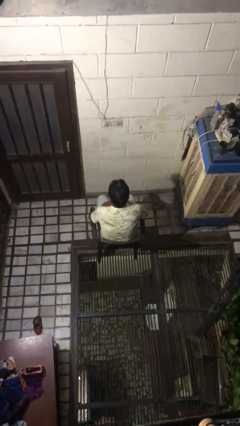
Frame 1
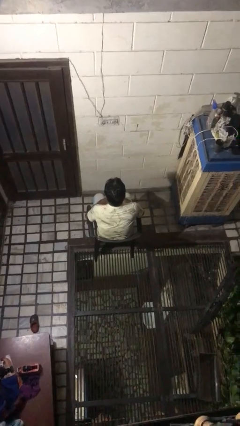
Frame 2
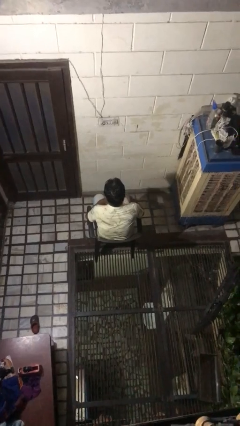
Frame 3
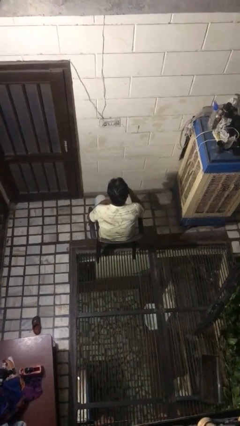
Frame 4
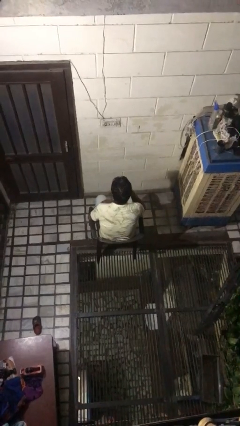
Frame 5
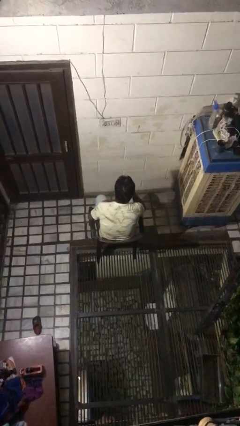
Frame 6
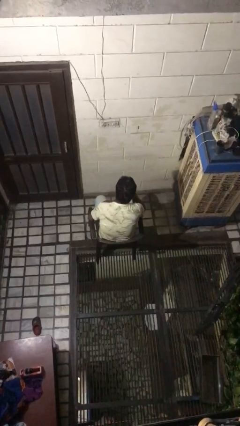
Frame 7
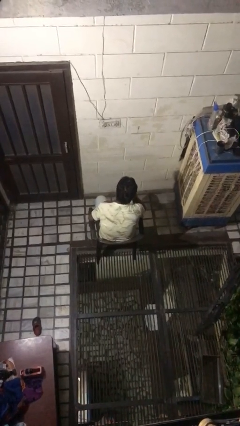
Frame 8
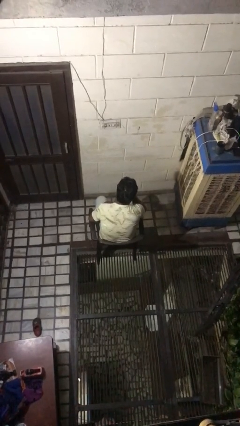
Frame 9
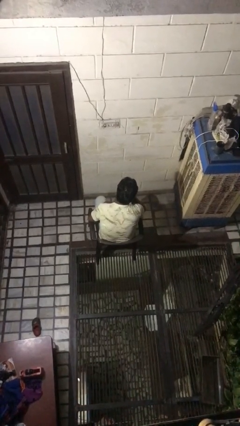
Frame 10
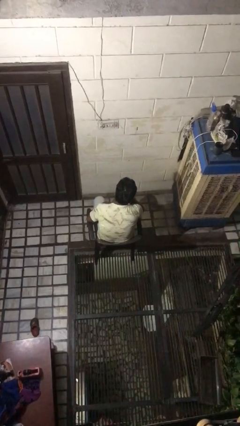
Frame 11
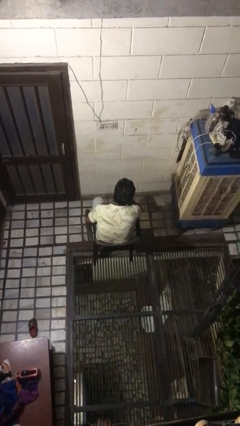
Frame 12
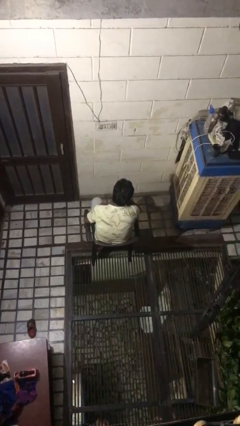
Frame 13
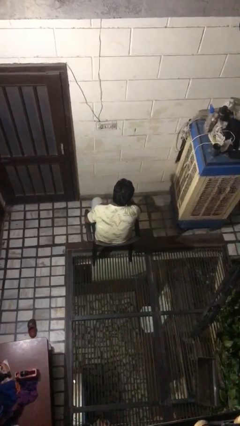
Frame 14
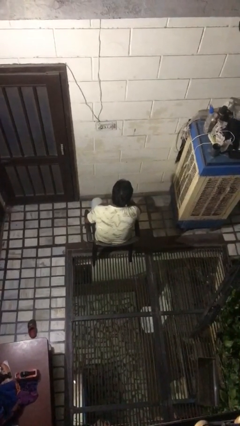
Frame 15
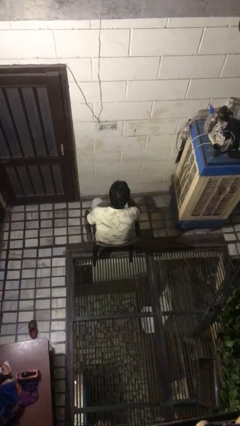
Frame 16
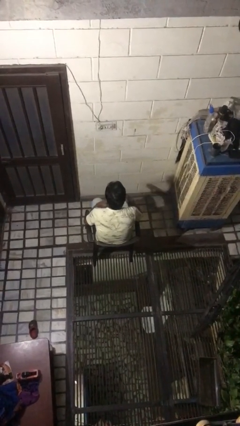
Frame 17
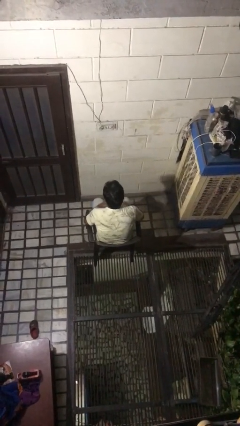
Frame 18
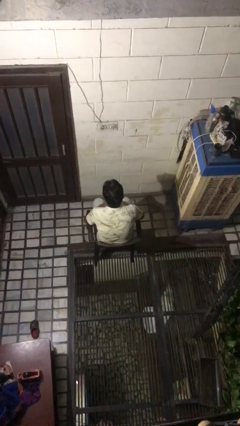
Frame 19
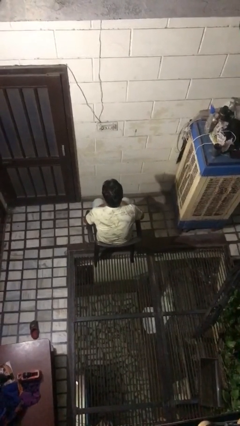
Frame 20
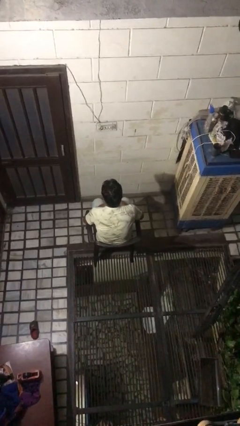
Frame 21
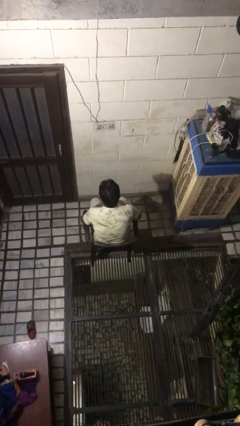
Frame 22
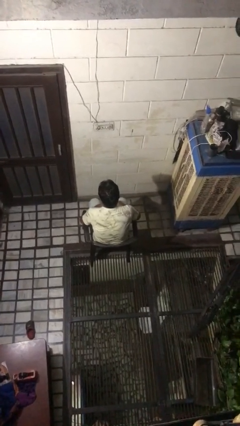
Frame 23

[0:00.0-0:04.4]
person strokes chin

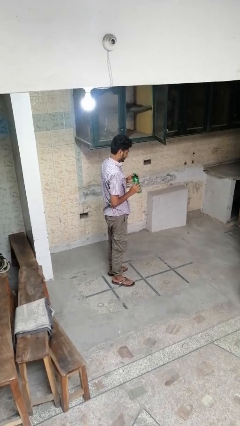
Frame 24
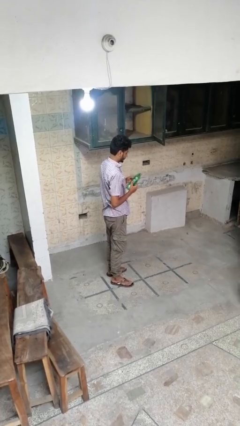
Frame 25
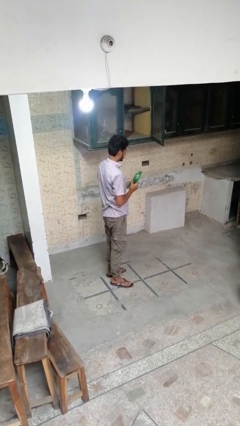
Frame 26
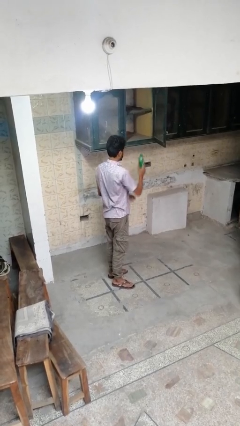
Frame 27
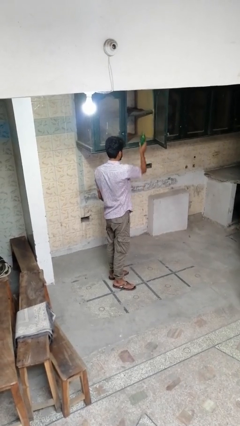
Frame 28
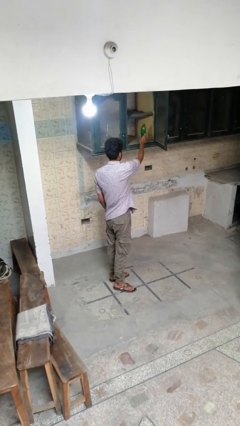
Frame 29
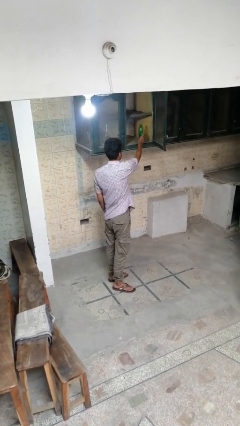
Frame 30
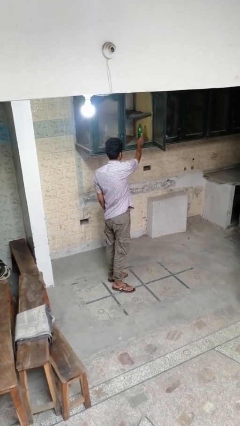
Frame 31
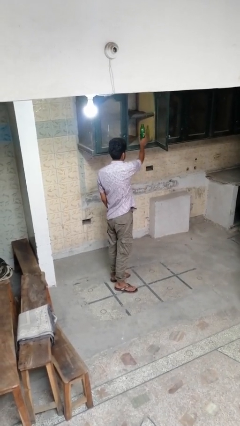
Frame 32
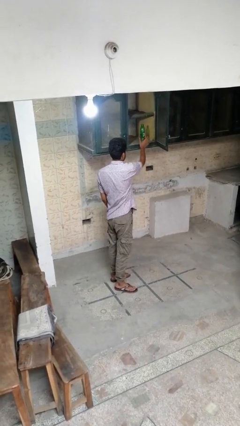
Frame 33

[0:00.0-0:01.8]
person puts down object into cabinet

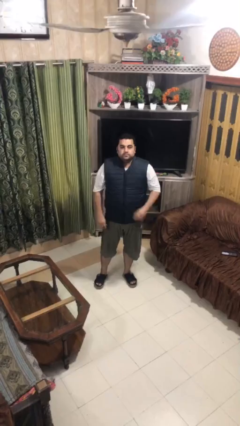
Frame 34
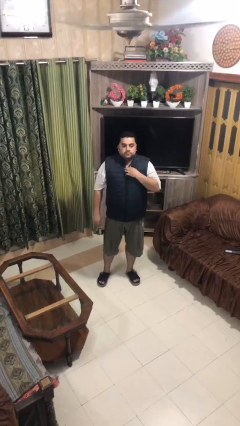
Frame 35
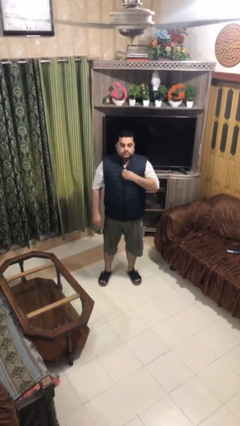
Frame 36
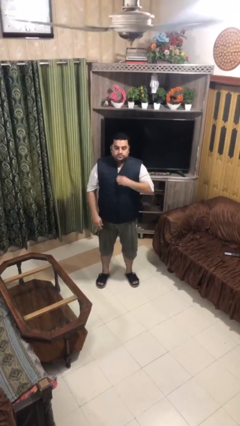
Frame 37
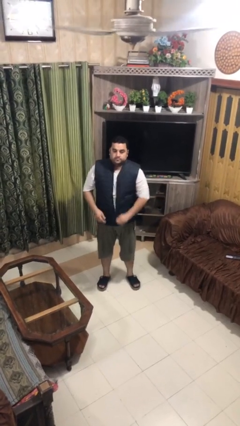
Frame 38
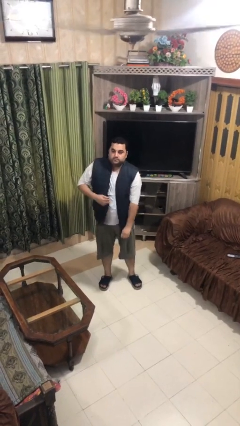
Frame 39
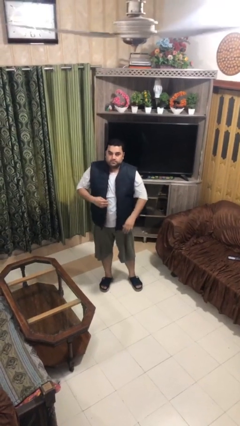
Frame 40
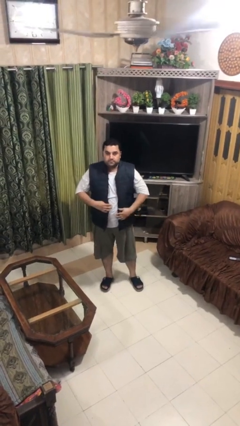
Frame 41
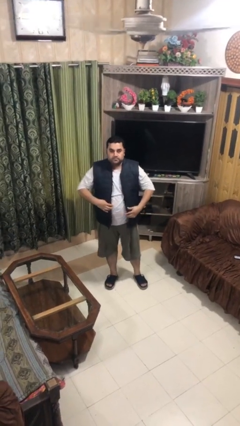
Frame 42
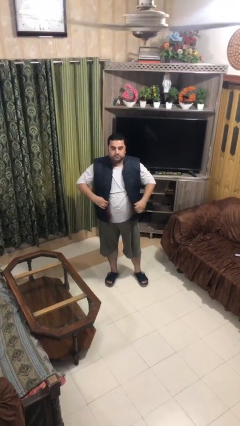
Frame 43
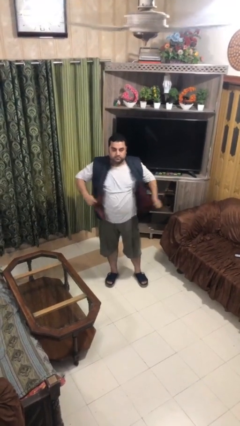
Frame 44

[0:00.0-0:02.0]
person unzips jacket

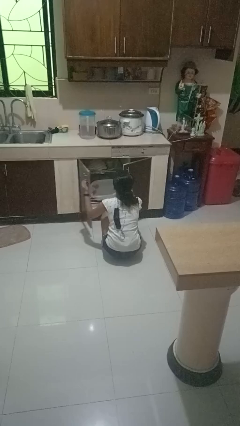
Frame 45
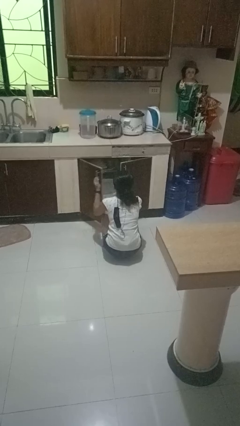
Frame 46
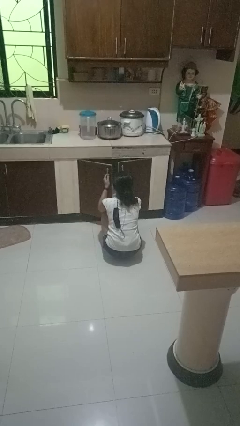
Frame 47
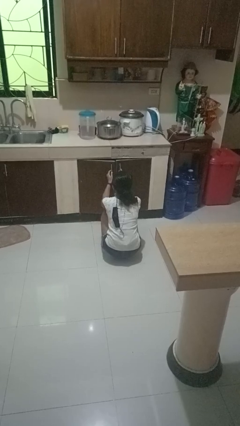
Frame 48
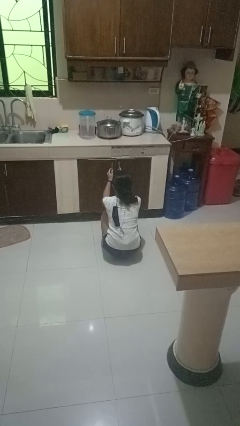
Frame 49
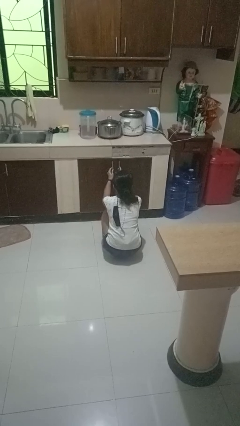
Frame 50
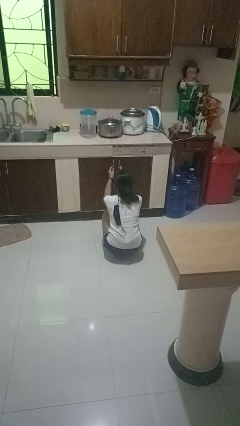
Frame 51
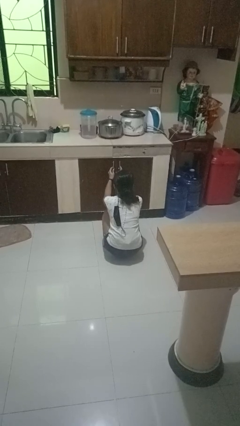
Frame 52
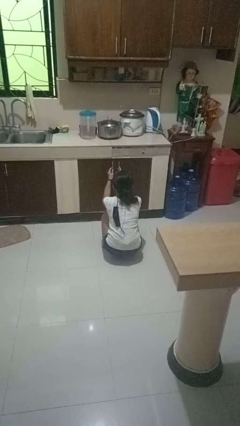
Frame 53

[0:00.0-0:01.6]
person closes dishwasher

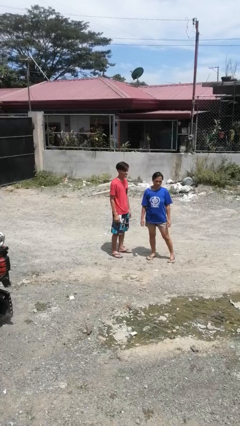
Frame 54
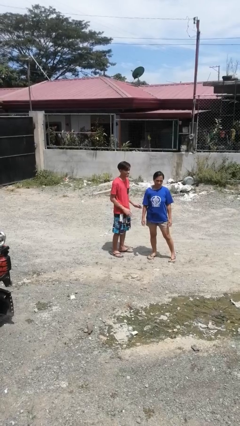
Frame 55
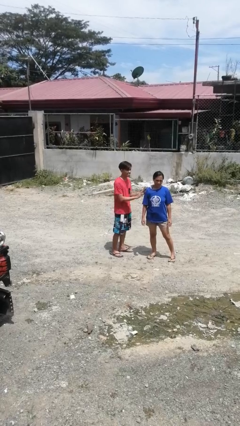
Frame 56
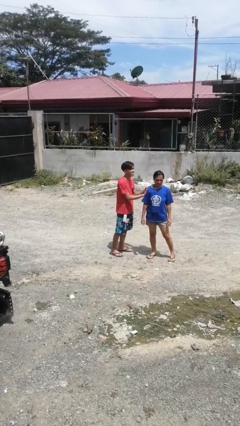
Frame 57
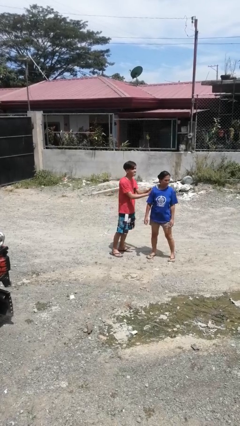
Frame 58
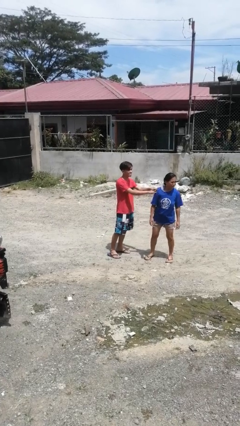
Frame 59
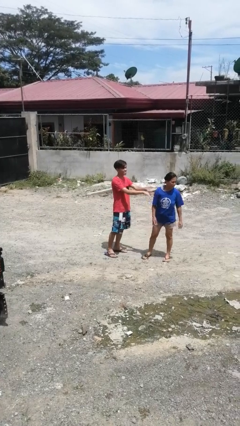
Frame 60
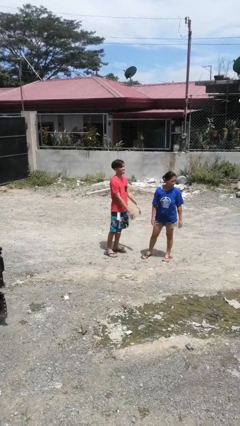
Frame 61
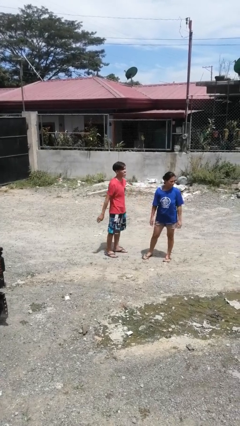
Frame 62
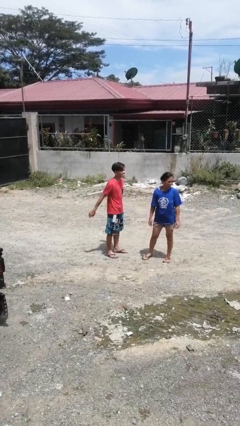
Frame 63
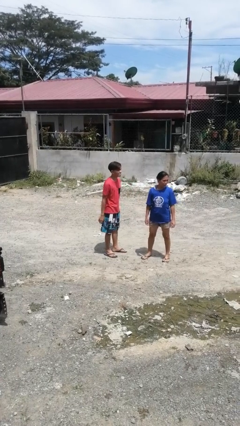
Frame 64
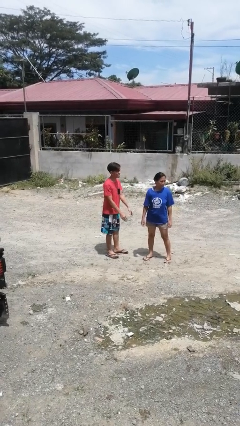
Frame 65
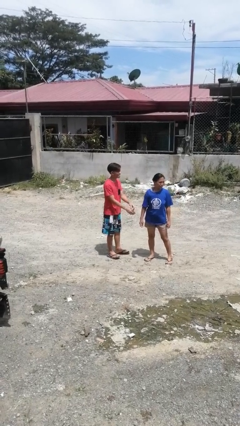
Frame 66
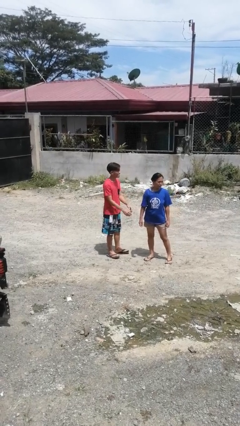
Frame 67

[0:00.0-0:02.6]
person shoves person

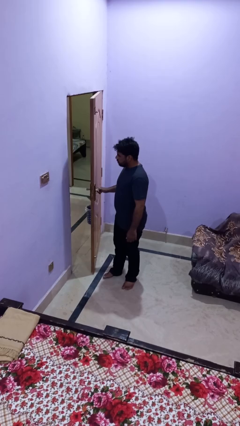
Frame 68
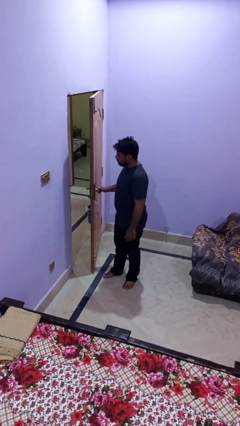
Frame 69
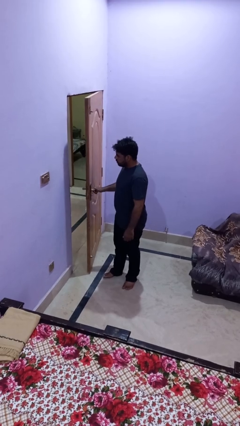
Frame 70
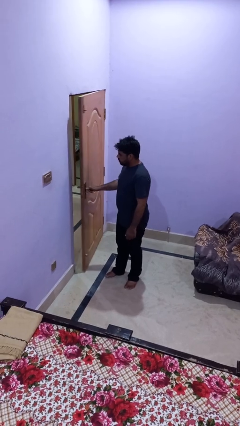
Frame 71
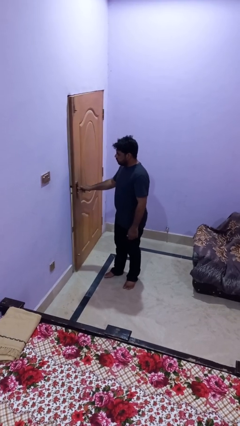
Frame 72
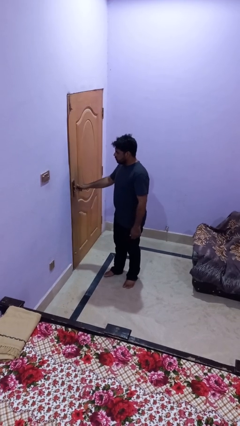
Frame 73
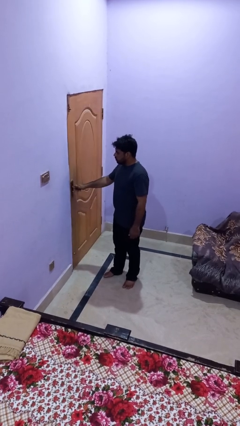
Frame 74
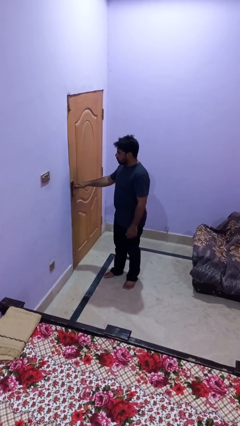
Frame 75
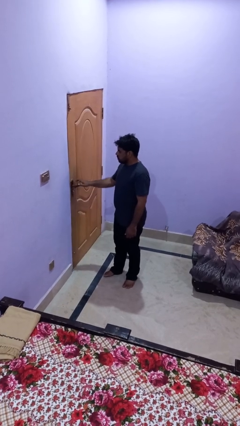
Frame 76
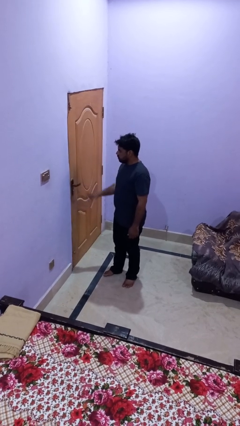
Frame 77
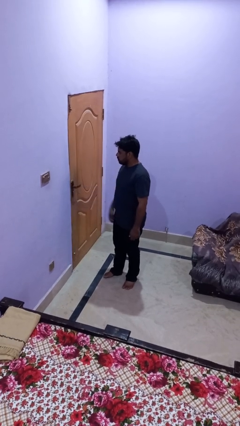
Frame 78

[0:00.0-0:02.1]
person closes facility door

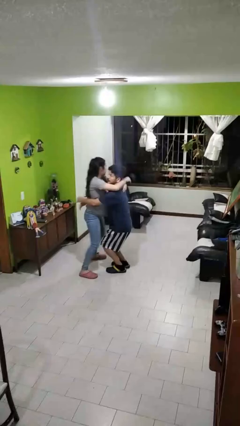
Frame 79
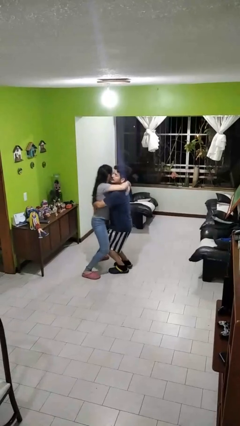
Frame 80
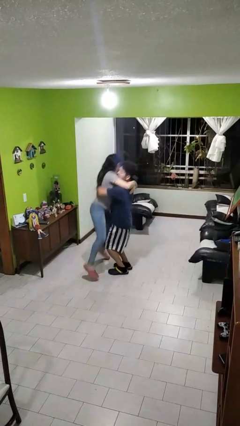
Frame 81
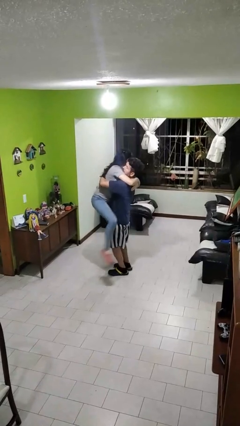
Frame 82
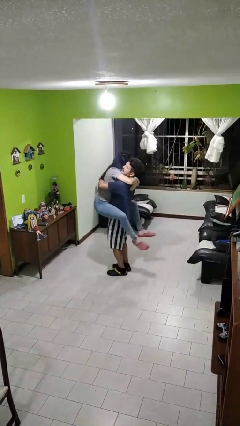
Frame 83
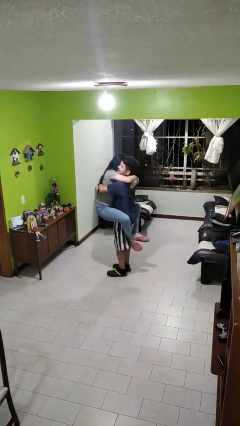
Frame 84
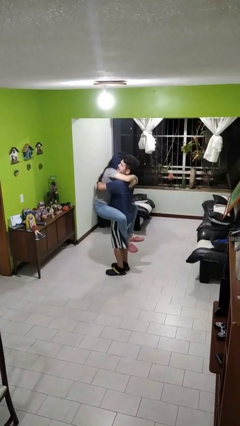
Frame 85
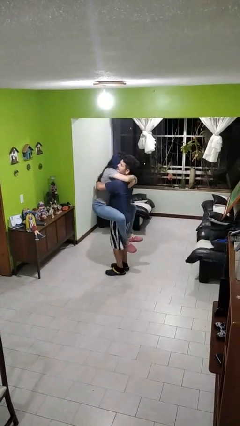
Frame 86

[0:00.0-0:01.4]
person picks up person

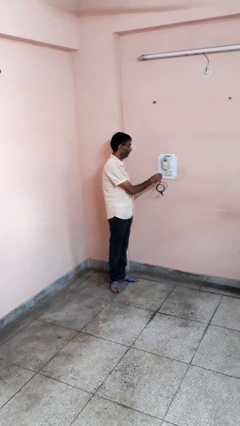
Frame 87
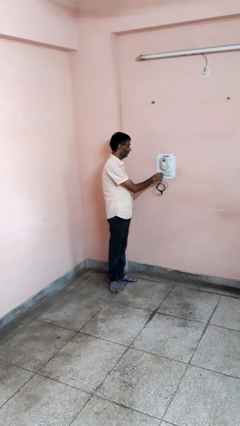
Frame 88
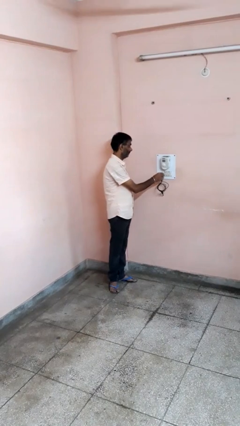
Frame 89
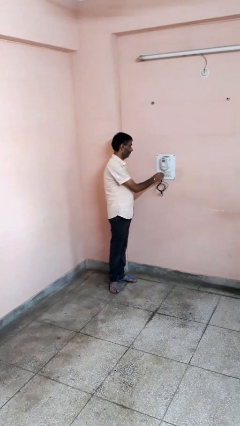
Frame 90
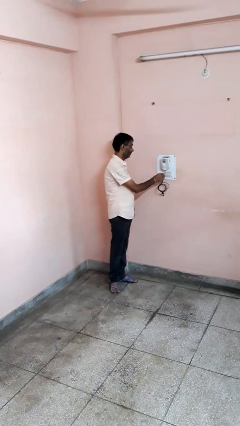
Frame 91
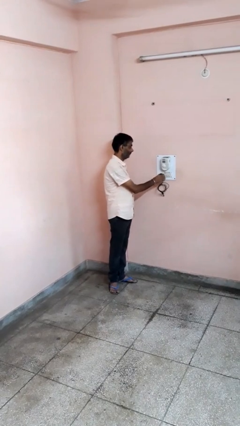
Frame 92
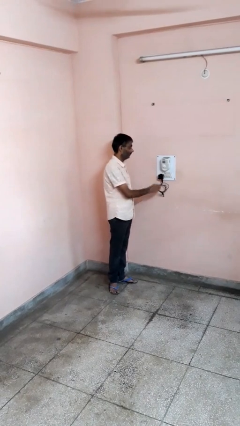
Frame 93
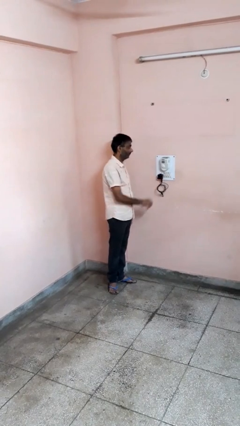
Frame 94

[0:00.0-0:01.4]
person plugs into electrical socket
